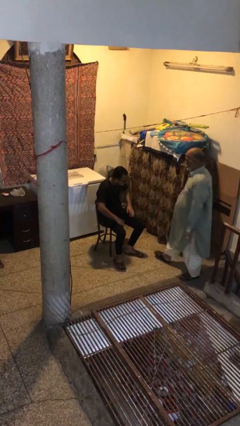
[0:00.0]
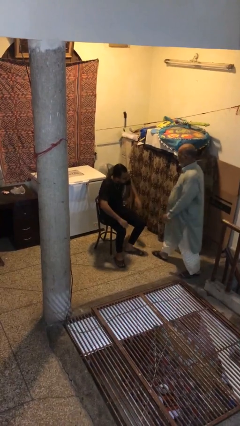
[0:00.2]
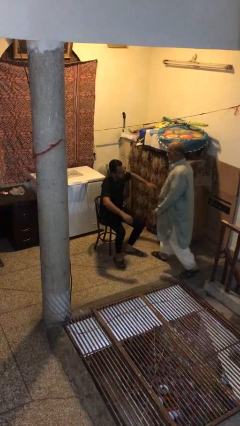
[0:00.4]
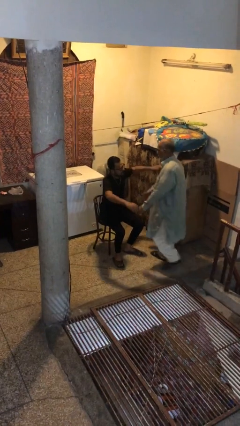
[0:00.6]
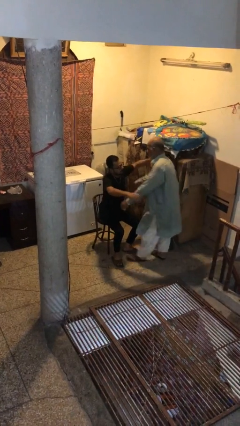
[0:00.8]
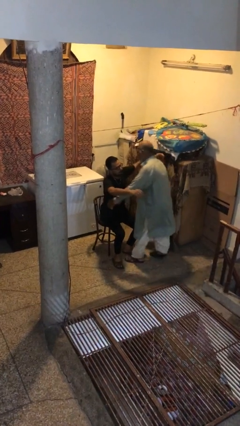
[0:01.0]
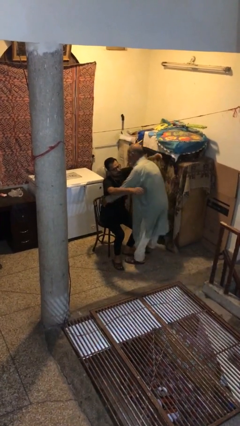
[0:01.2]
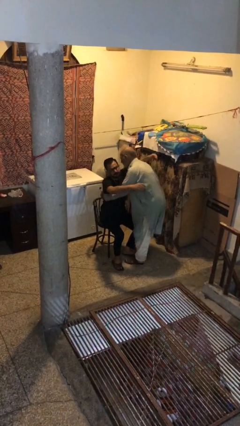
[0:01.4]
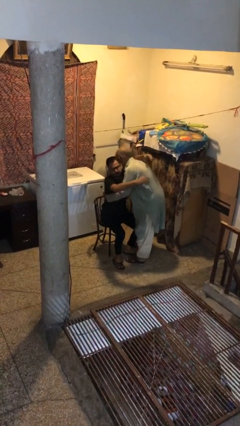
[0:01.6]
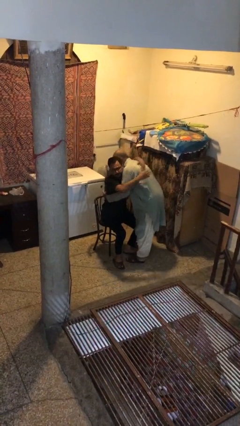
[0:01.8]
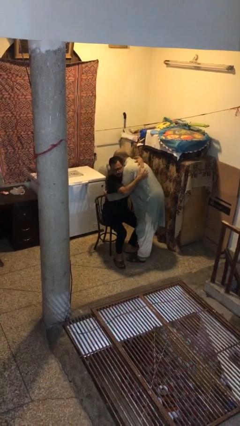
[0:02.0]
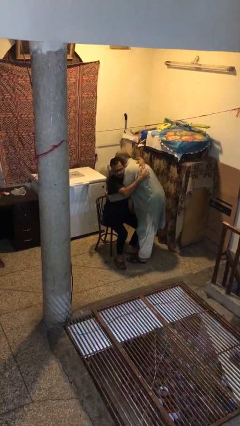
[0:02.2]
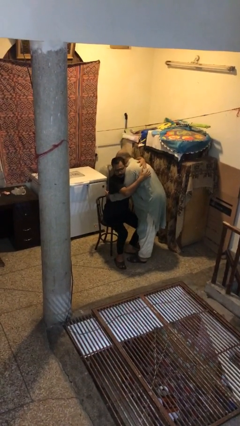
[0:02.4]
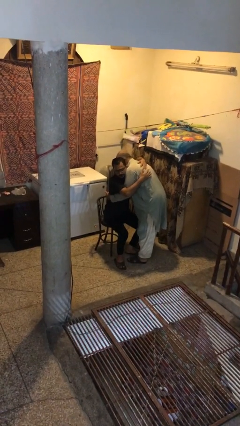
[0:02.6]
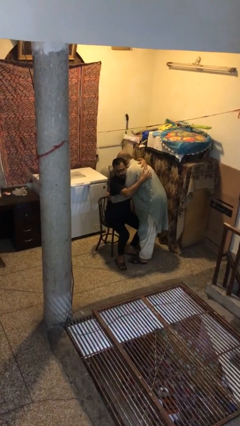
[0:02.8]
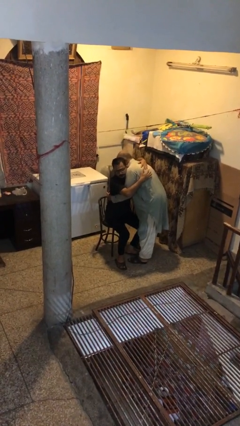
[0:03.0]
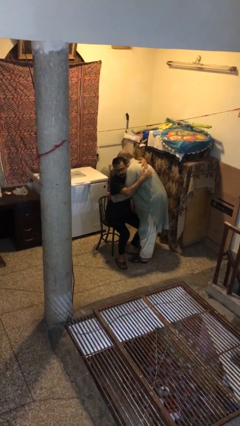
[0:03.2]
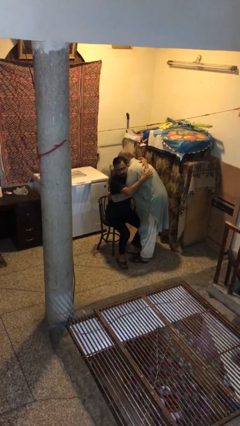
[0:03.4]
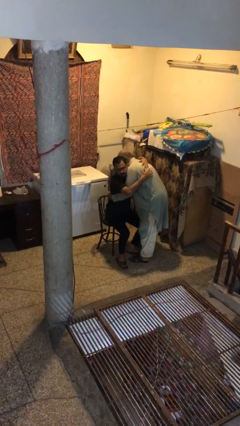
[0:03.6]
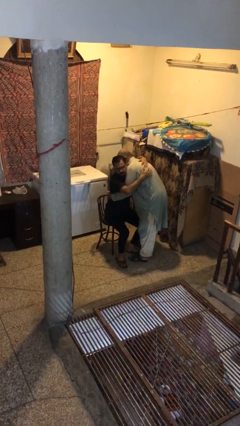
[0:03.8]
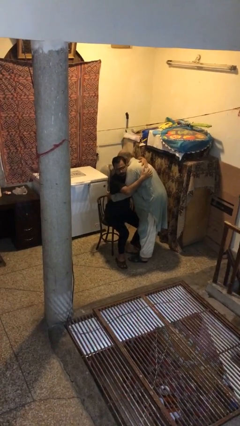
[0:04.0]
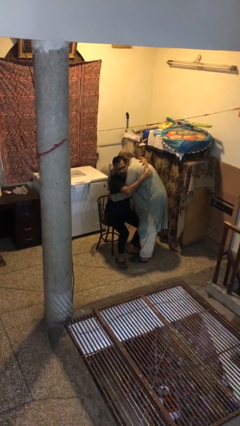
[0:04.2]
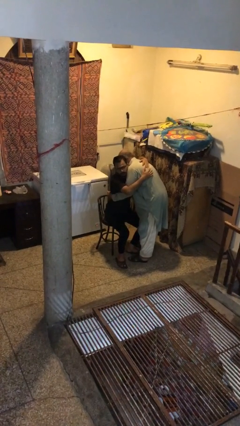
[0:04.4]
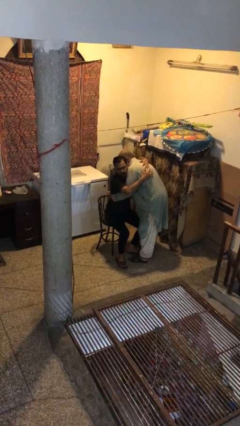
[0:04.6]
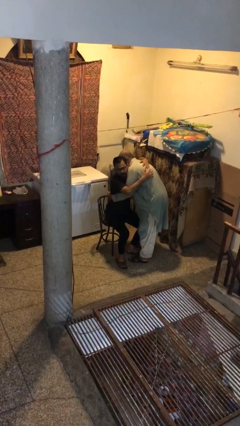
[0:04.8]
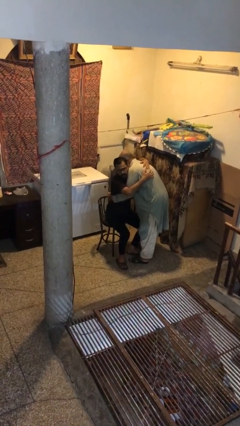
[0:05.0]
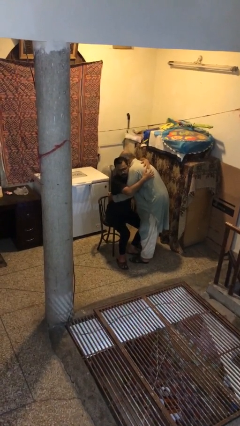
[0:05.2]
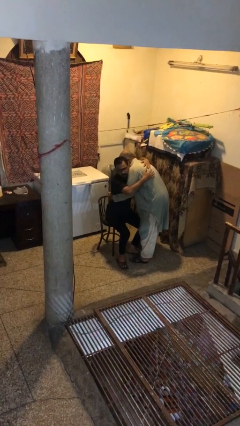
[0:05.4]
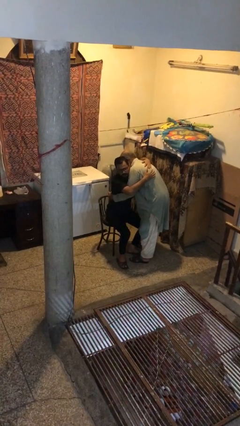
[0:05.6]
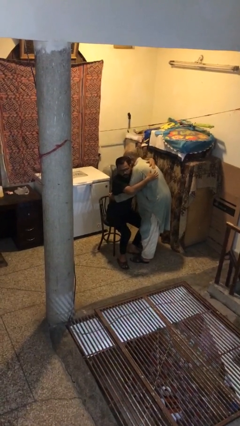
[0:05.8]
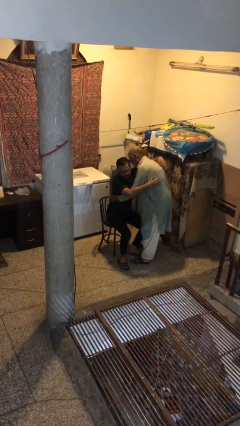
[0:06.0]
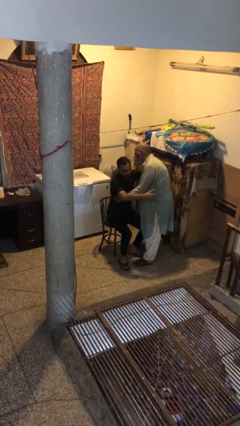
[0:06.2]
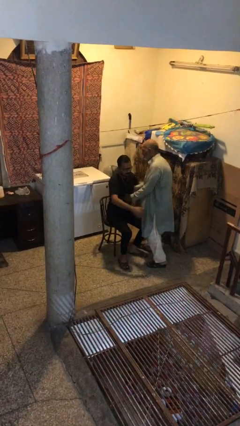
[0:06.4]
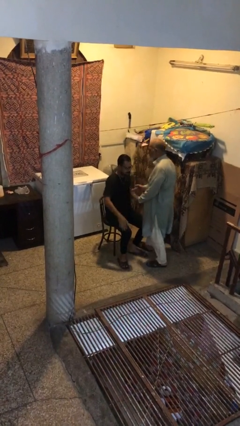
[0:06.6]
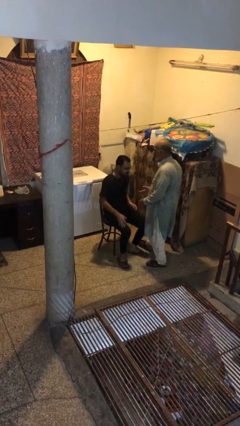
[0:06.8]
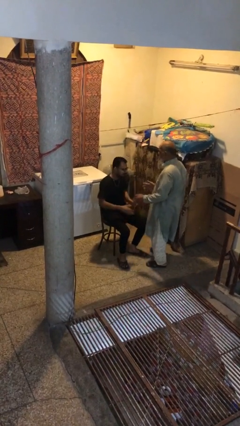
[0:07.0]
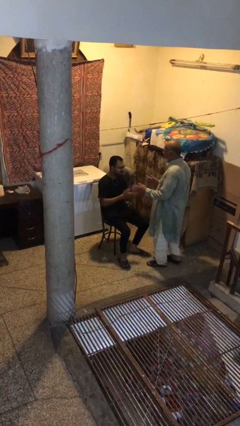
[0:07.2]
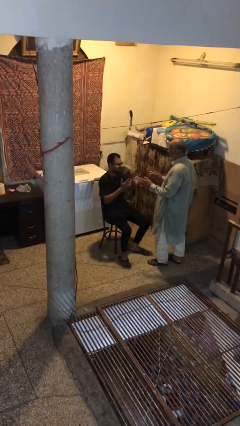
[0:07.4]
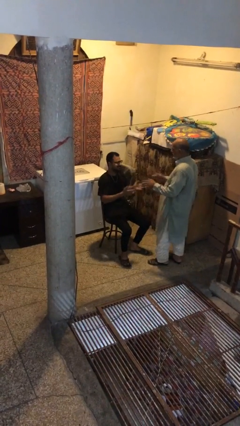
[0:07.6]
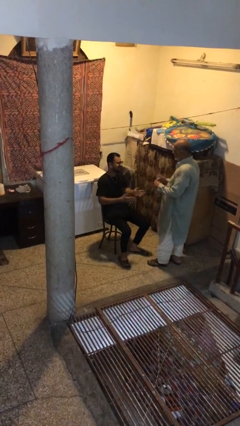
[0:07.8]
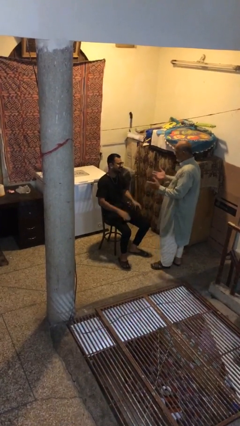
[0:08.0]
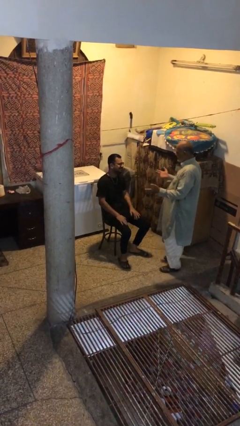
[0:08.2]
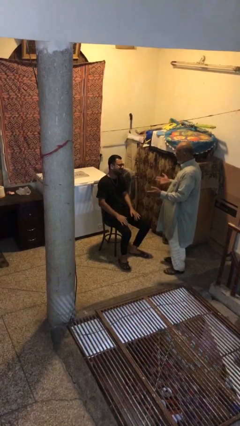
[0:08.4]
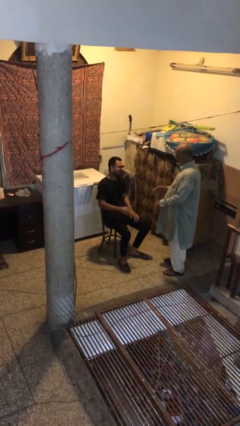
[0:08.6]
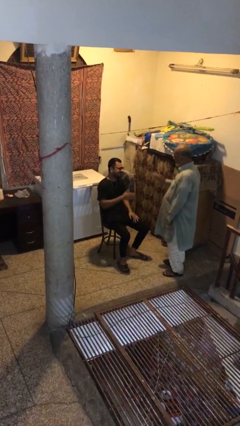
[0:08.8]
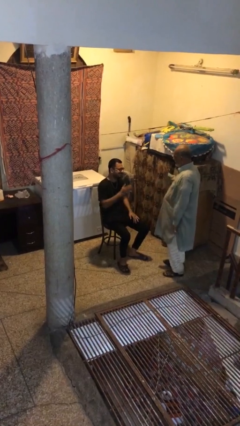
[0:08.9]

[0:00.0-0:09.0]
person embraces person

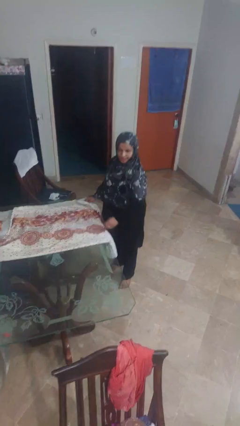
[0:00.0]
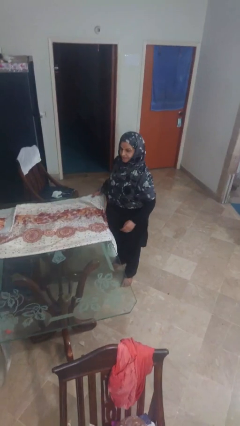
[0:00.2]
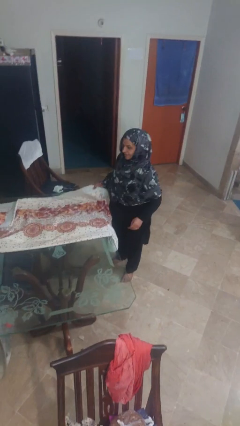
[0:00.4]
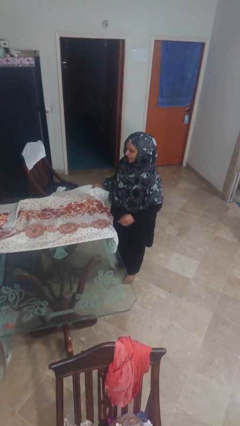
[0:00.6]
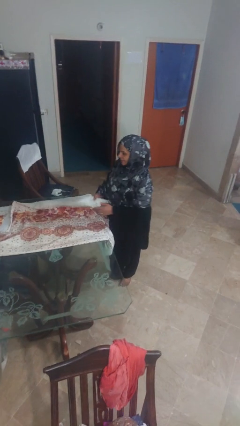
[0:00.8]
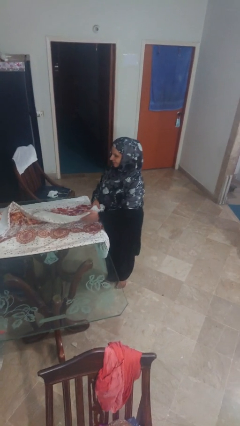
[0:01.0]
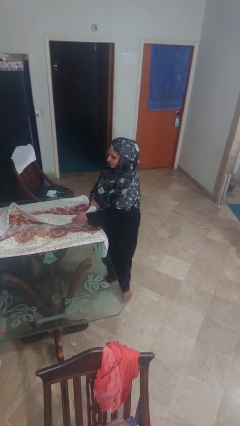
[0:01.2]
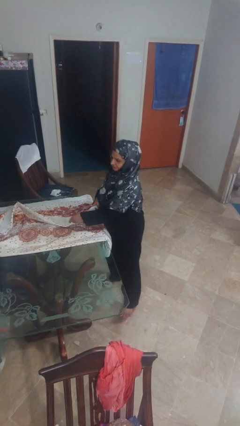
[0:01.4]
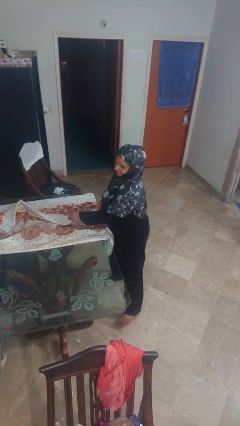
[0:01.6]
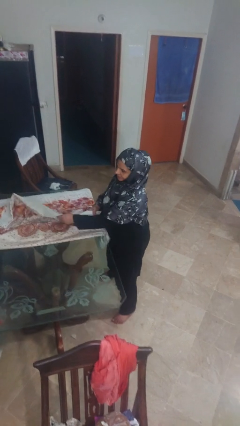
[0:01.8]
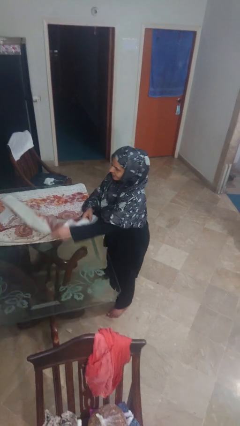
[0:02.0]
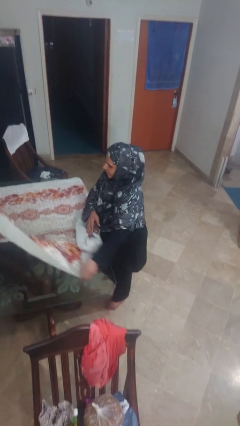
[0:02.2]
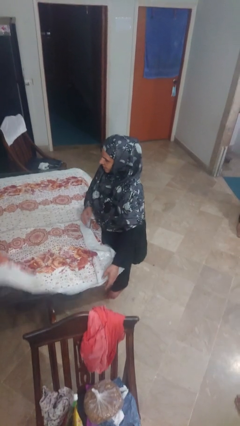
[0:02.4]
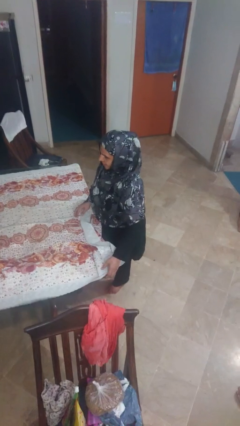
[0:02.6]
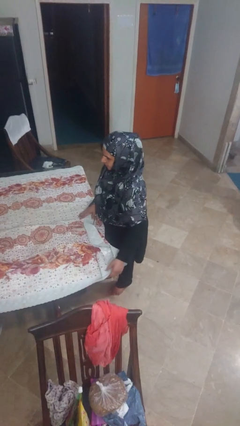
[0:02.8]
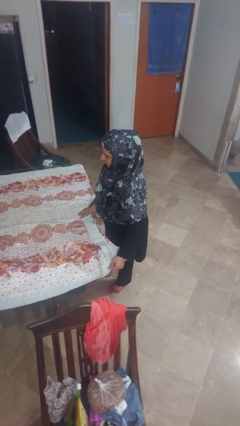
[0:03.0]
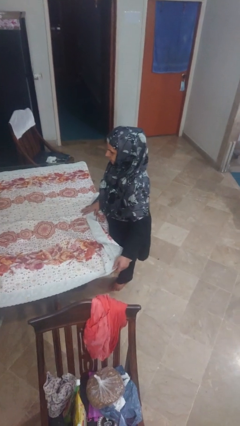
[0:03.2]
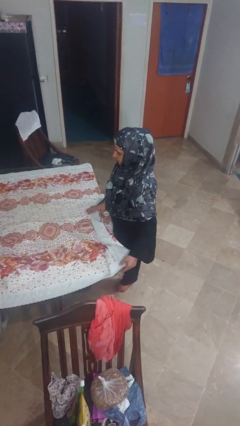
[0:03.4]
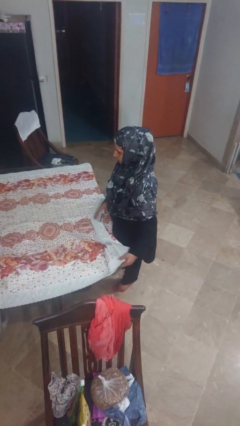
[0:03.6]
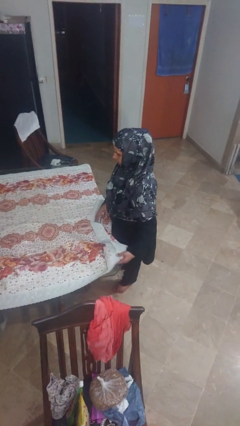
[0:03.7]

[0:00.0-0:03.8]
person spreads tablecloth

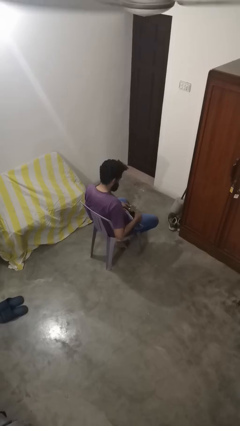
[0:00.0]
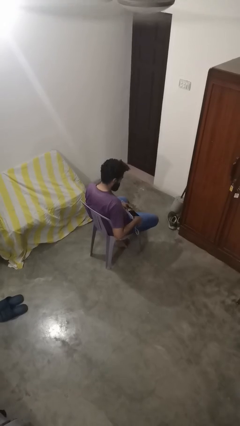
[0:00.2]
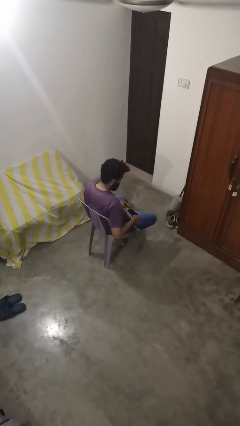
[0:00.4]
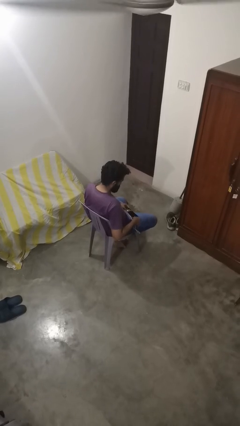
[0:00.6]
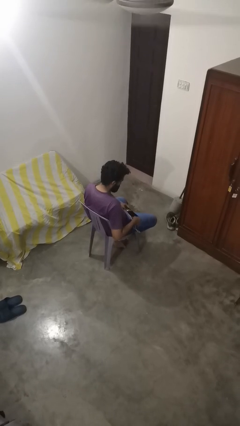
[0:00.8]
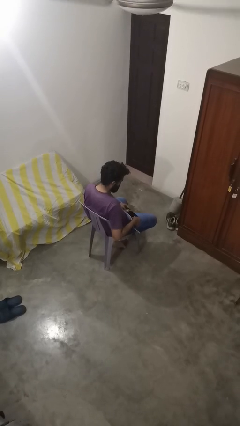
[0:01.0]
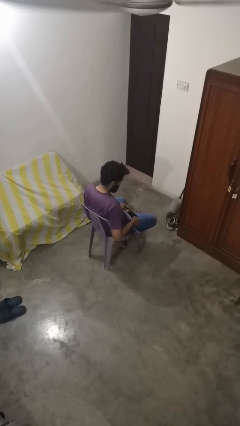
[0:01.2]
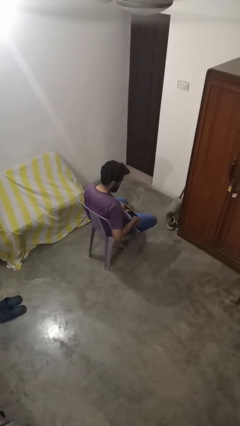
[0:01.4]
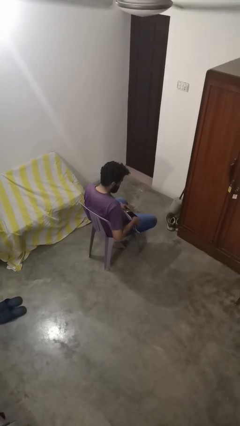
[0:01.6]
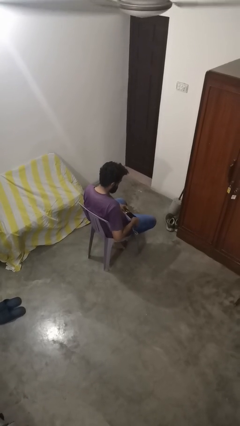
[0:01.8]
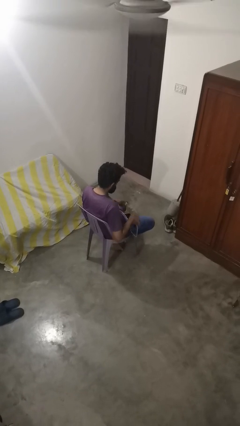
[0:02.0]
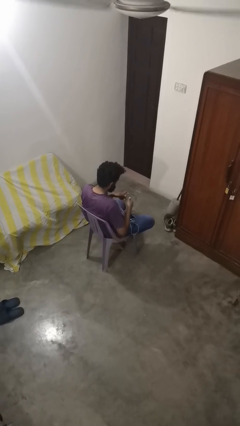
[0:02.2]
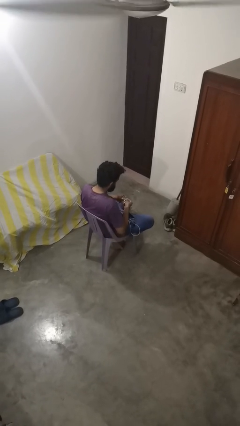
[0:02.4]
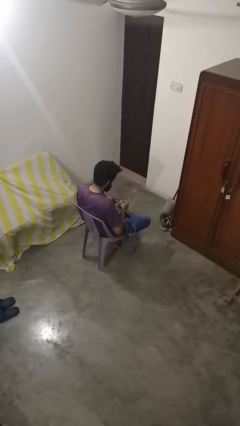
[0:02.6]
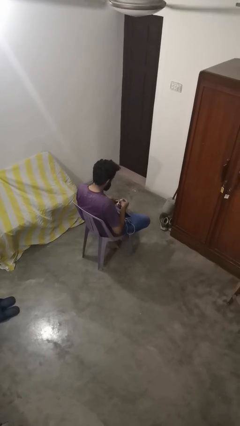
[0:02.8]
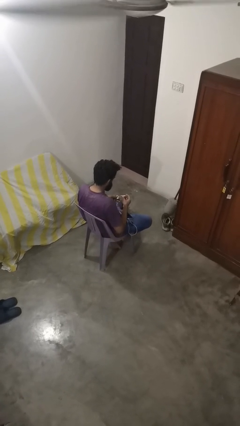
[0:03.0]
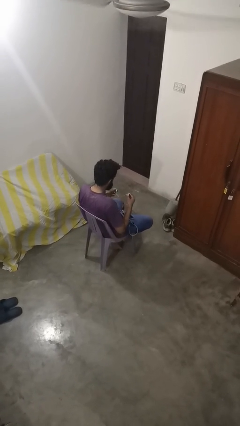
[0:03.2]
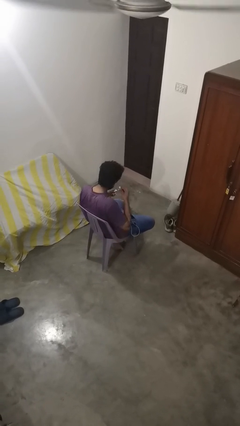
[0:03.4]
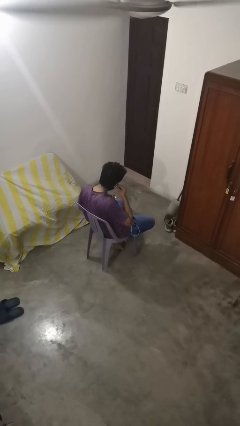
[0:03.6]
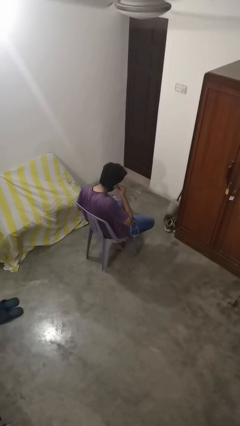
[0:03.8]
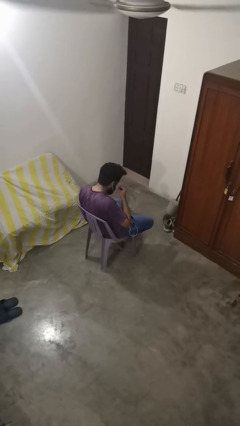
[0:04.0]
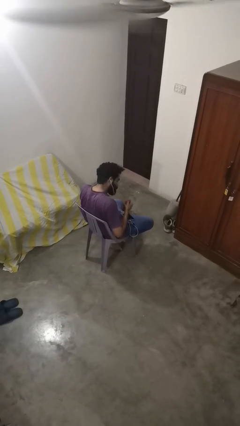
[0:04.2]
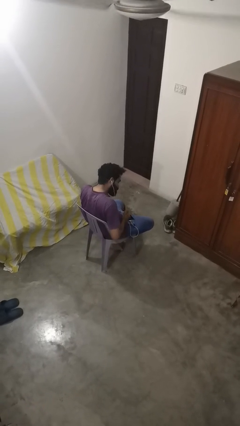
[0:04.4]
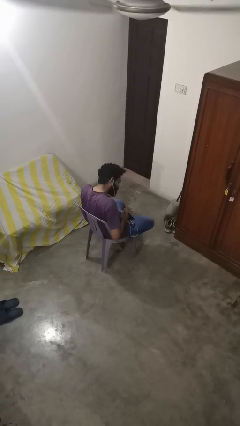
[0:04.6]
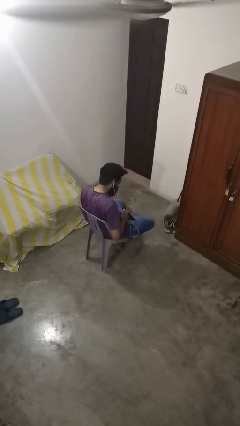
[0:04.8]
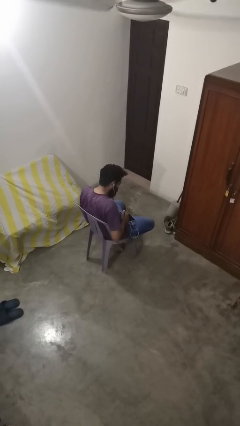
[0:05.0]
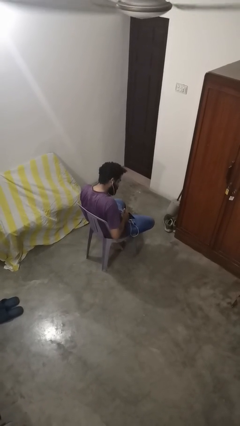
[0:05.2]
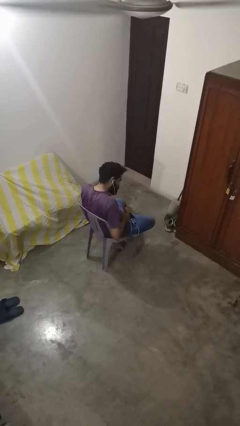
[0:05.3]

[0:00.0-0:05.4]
person puts on headphones
